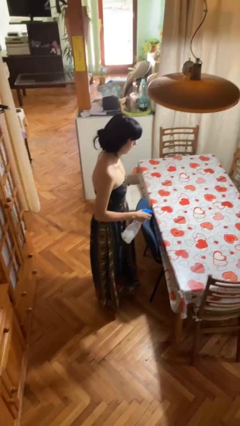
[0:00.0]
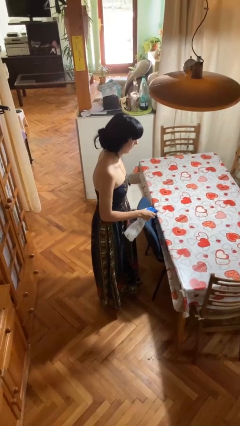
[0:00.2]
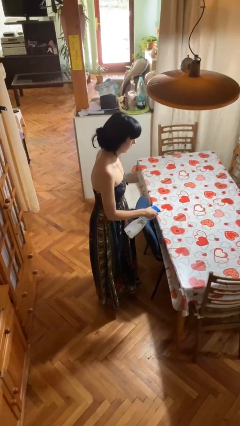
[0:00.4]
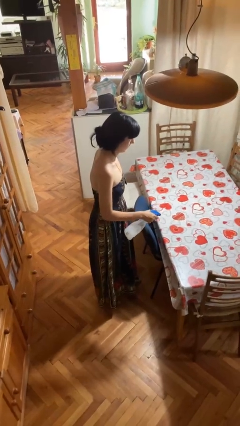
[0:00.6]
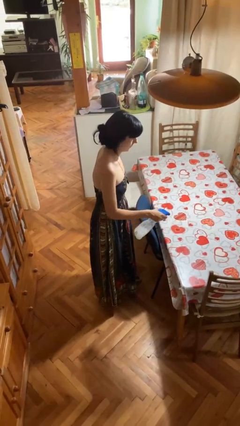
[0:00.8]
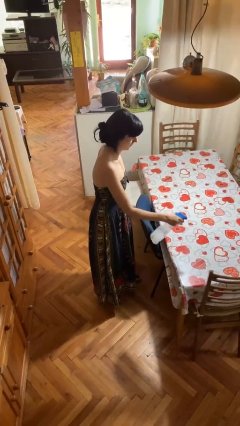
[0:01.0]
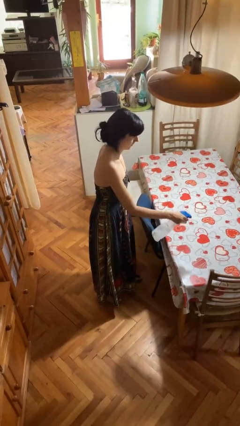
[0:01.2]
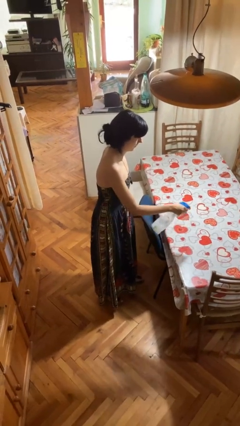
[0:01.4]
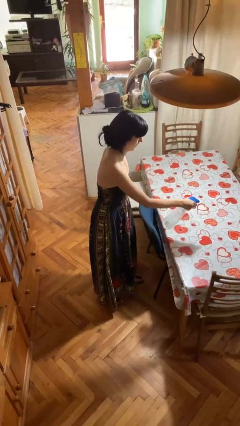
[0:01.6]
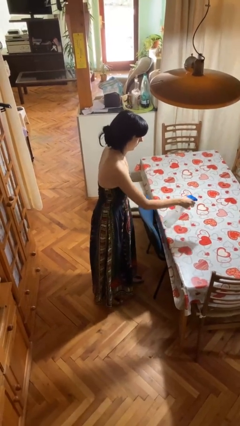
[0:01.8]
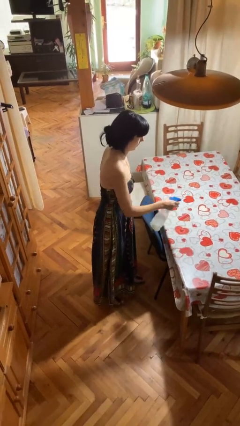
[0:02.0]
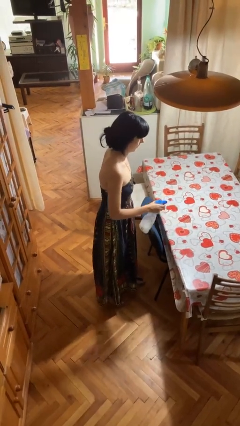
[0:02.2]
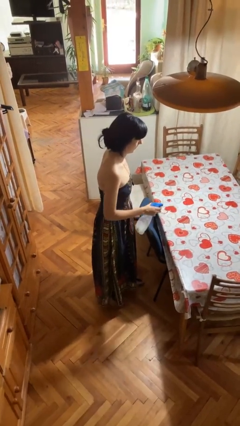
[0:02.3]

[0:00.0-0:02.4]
person sprays from bottle

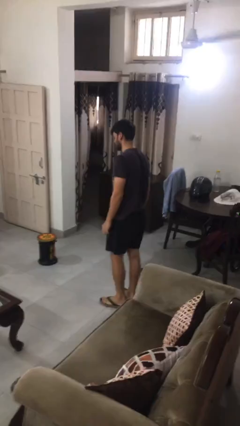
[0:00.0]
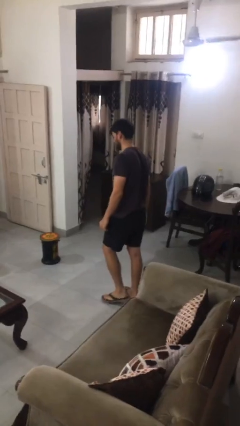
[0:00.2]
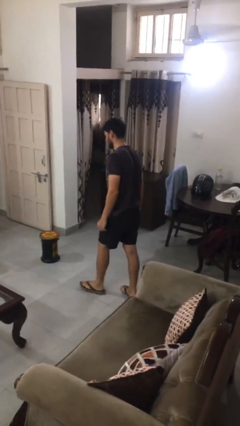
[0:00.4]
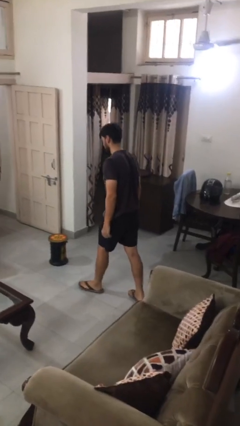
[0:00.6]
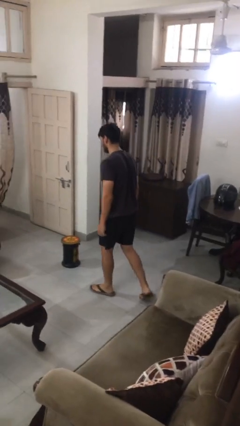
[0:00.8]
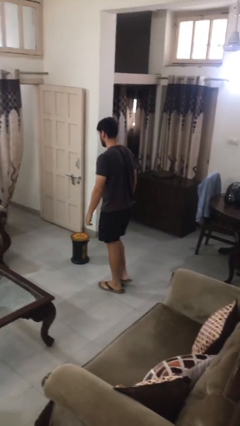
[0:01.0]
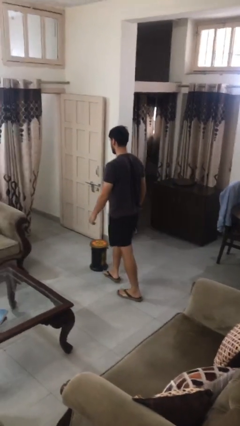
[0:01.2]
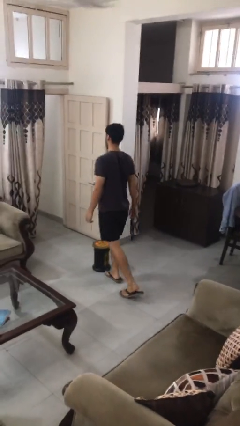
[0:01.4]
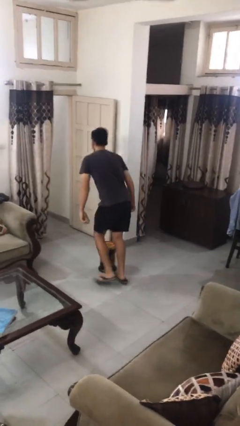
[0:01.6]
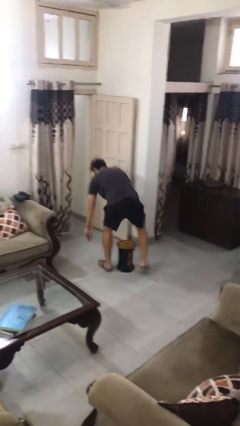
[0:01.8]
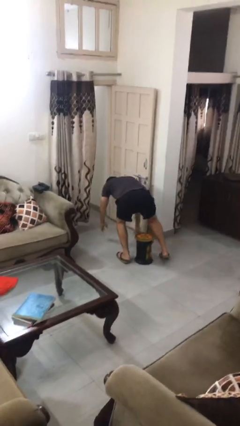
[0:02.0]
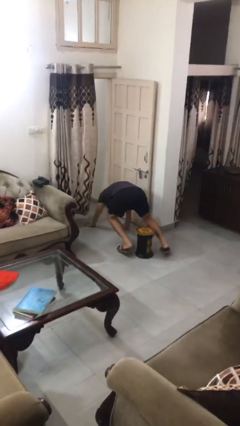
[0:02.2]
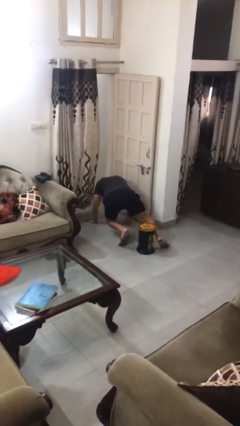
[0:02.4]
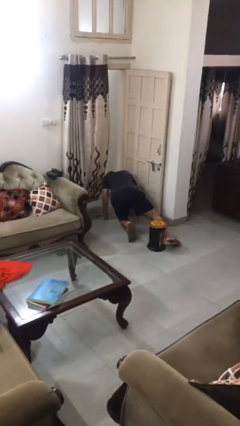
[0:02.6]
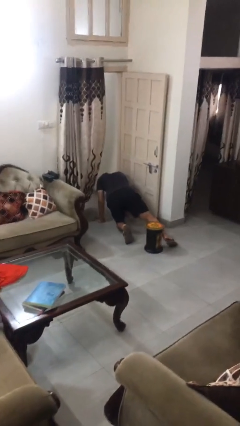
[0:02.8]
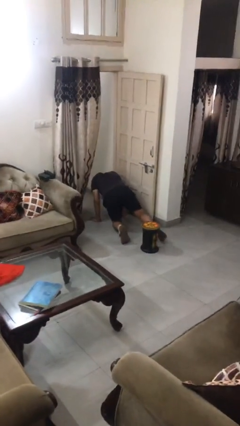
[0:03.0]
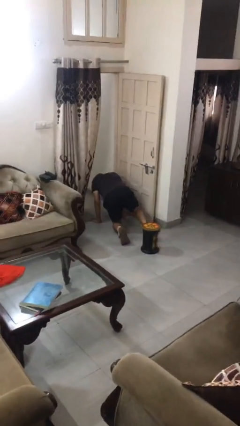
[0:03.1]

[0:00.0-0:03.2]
person trips on object on floor

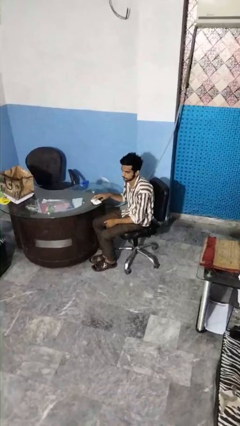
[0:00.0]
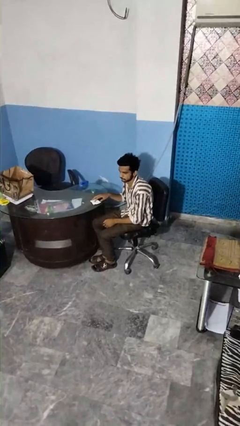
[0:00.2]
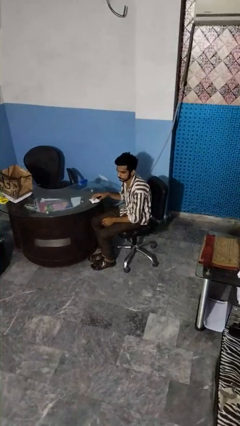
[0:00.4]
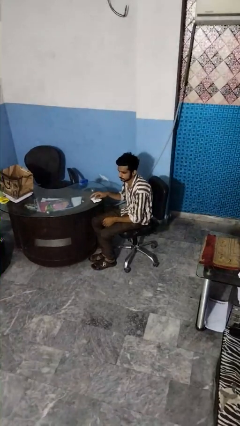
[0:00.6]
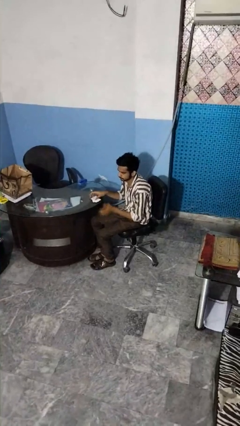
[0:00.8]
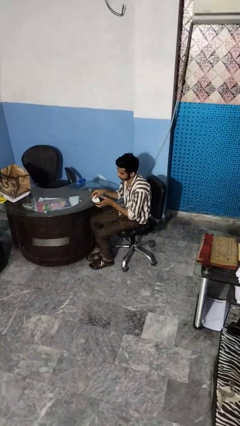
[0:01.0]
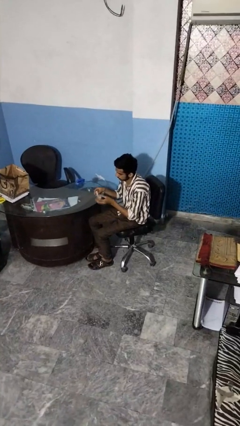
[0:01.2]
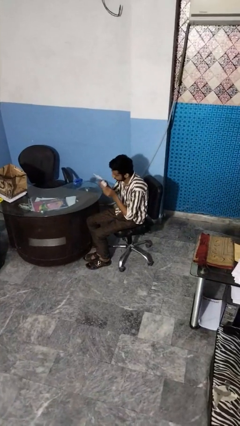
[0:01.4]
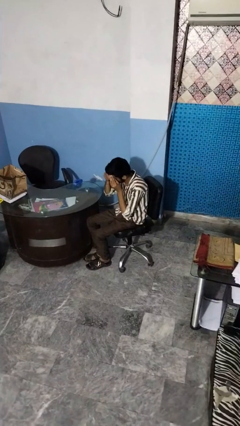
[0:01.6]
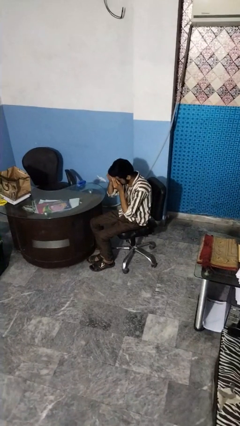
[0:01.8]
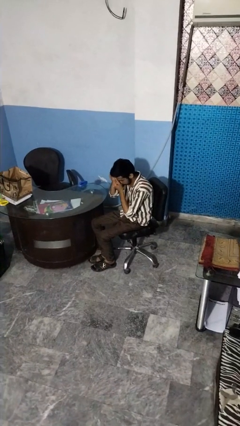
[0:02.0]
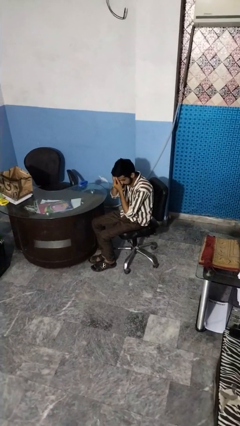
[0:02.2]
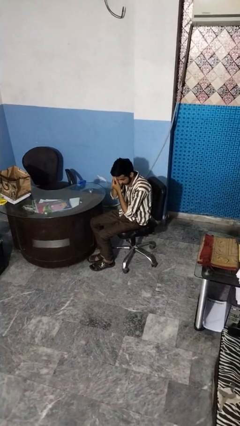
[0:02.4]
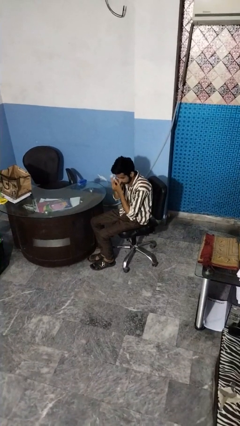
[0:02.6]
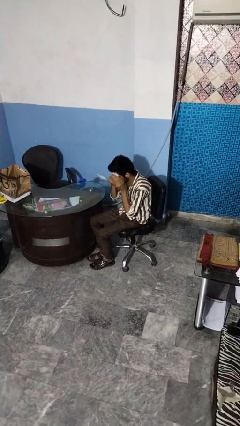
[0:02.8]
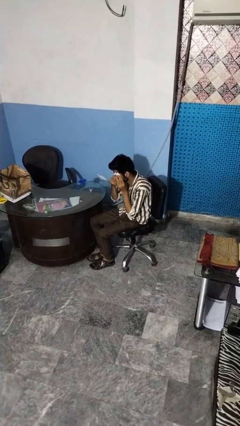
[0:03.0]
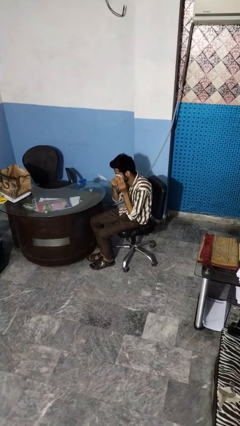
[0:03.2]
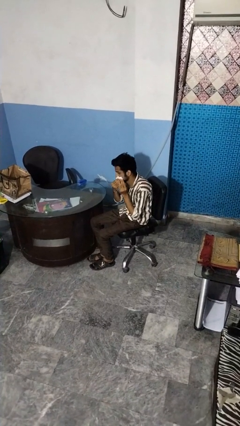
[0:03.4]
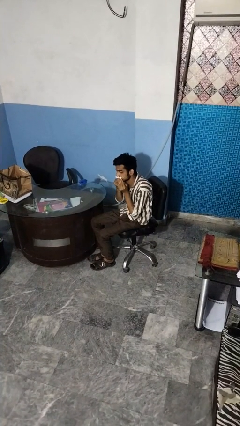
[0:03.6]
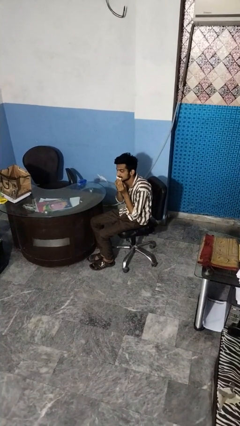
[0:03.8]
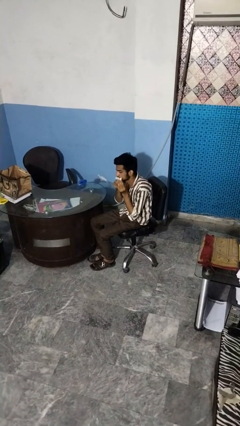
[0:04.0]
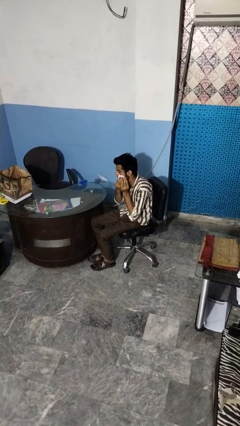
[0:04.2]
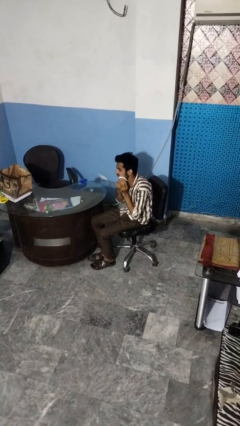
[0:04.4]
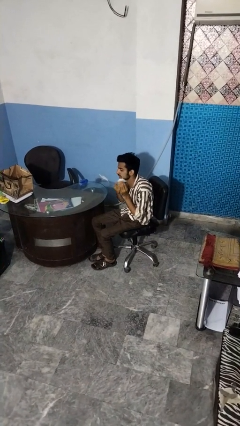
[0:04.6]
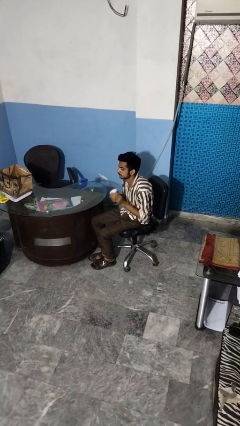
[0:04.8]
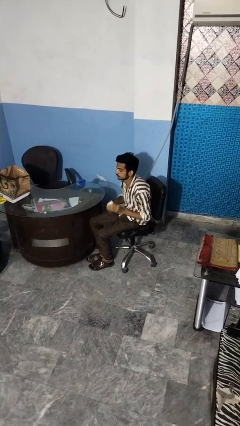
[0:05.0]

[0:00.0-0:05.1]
person wipes mouth with napkin

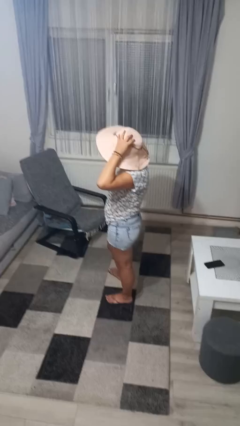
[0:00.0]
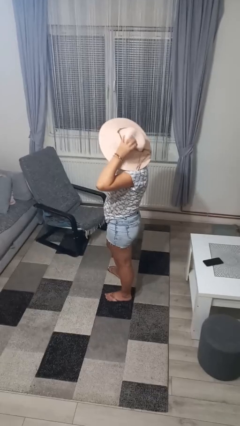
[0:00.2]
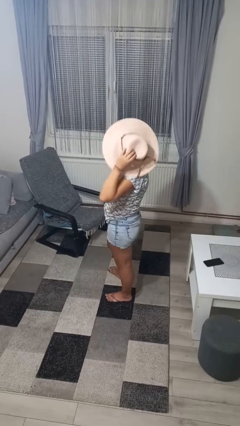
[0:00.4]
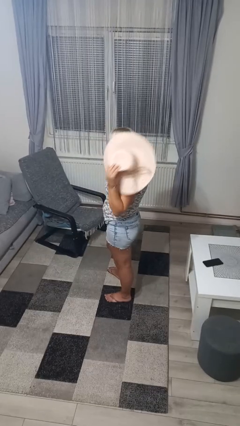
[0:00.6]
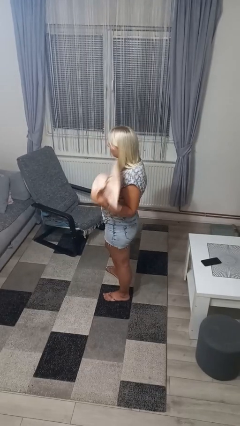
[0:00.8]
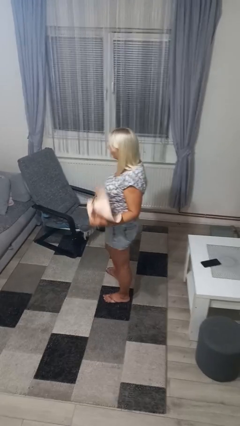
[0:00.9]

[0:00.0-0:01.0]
person takes off hat

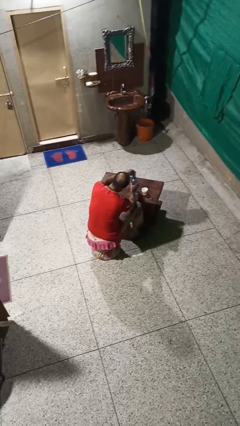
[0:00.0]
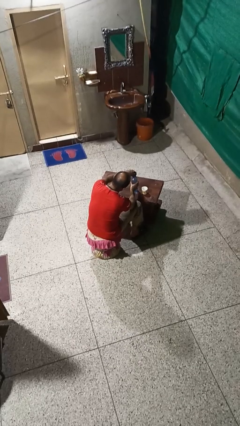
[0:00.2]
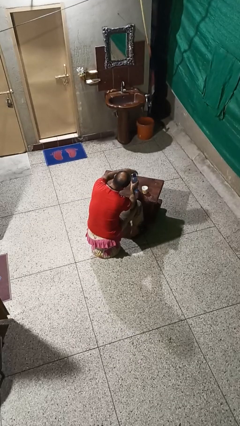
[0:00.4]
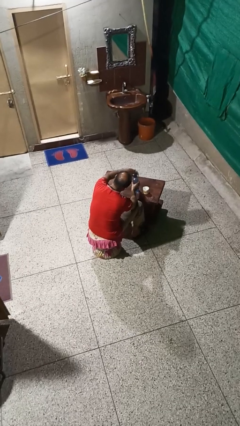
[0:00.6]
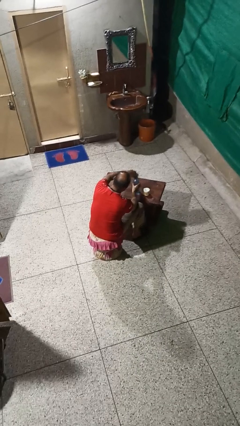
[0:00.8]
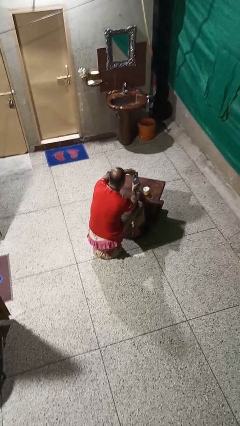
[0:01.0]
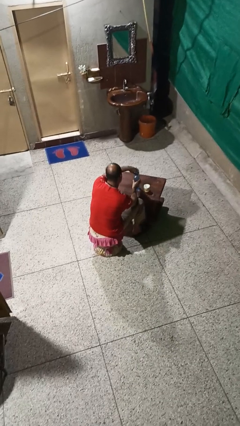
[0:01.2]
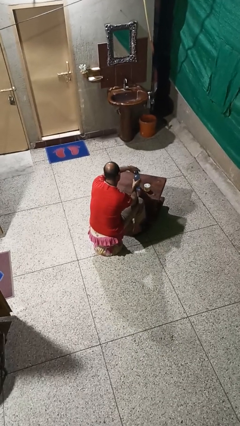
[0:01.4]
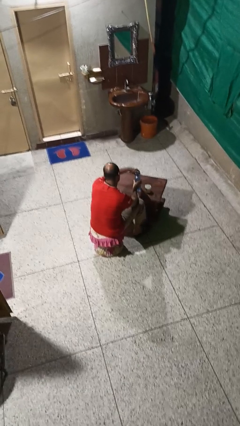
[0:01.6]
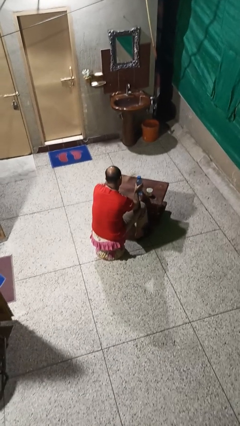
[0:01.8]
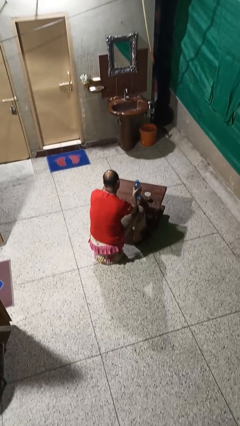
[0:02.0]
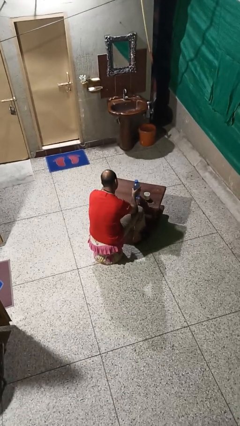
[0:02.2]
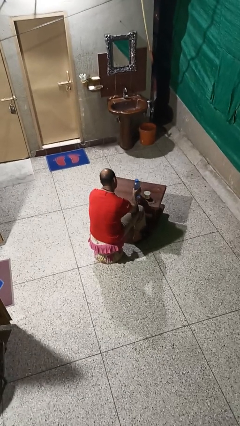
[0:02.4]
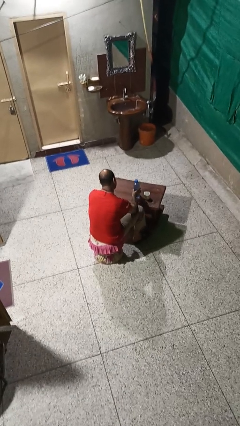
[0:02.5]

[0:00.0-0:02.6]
person screws lid to bottle

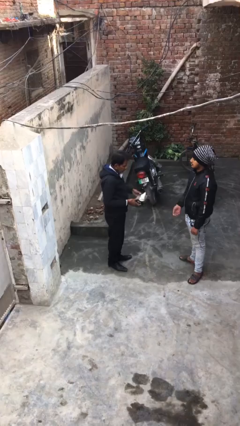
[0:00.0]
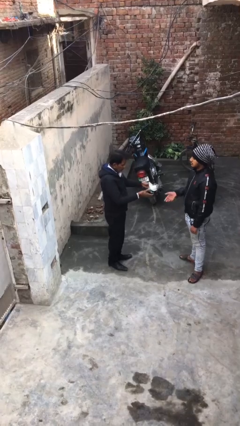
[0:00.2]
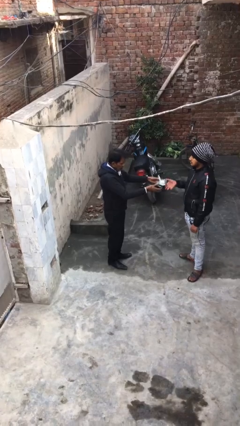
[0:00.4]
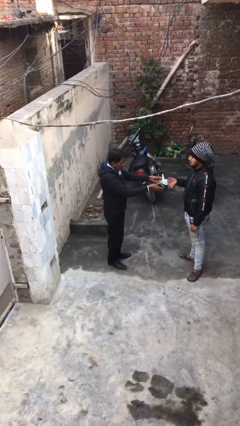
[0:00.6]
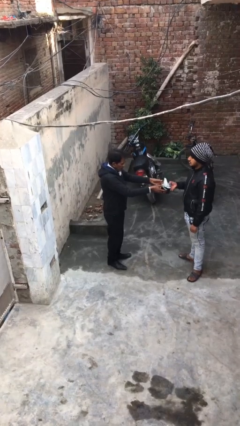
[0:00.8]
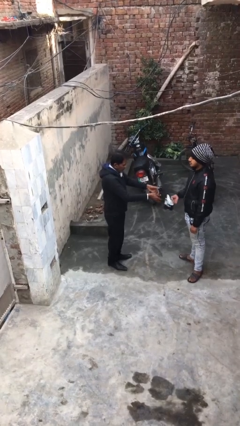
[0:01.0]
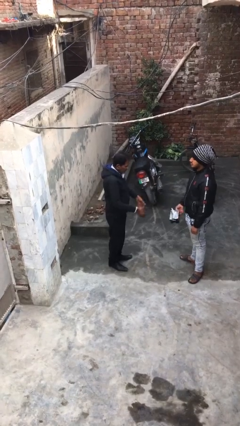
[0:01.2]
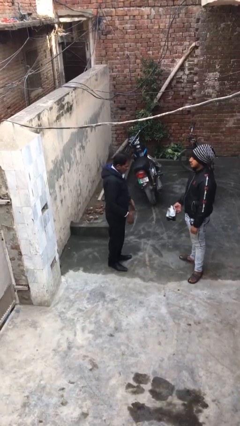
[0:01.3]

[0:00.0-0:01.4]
person transfers object to person

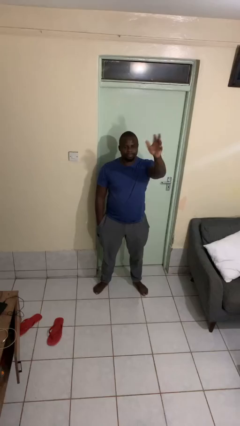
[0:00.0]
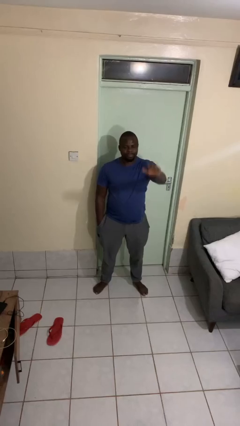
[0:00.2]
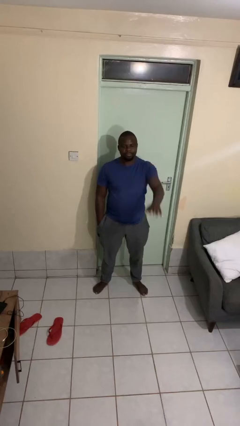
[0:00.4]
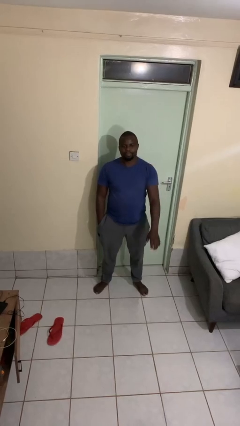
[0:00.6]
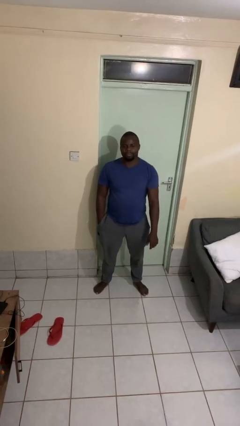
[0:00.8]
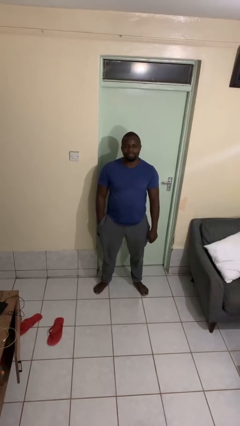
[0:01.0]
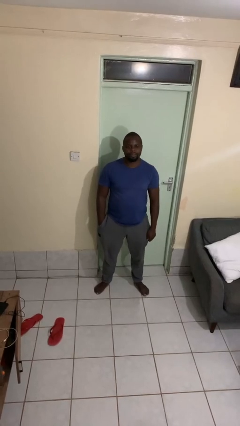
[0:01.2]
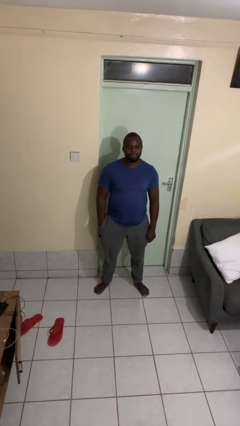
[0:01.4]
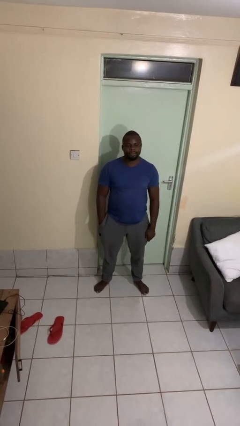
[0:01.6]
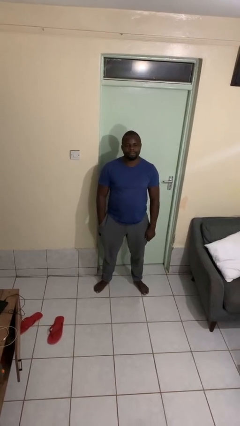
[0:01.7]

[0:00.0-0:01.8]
person gestures swipe down
